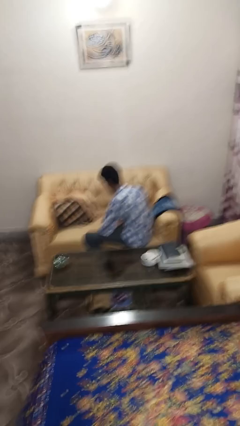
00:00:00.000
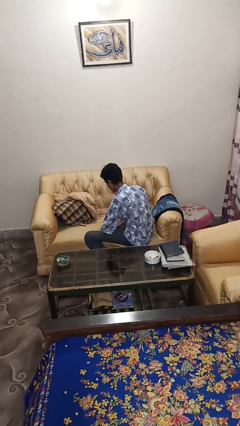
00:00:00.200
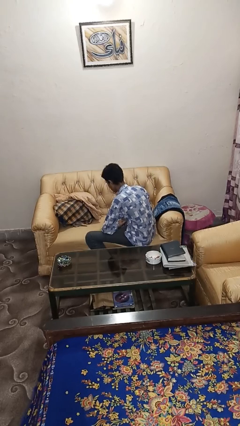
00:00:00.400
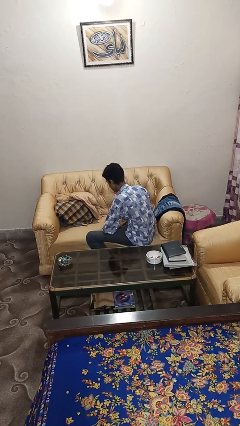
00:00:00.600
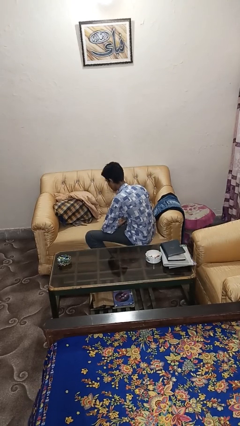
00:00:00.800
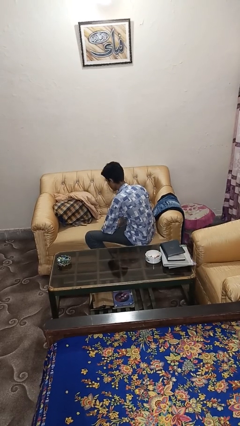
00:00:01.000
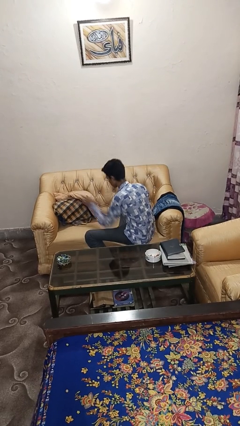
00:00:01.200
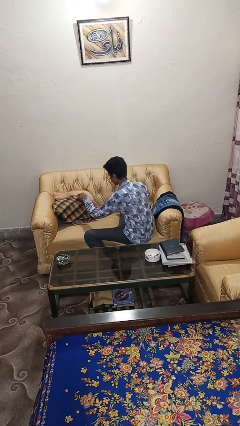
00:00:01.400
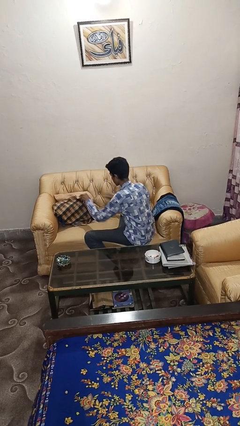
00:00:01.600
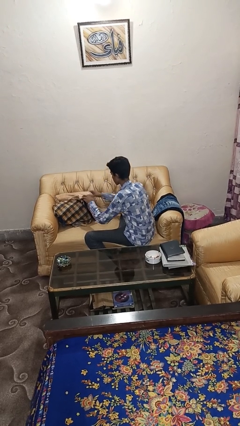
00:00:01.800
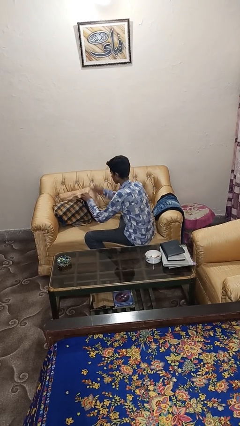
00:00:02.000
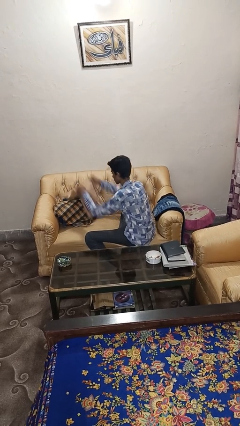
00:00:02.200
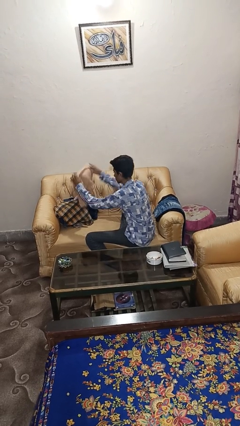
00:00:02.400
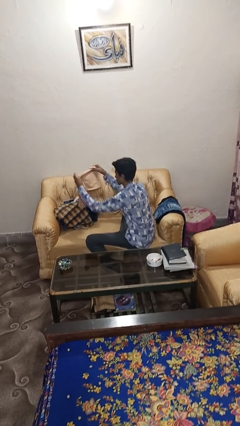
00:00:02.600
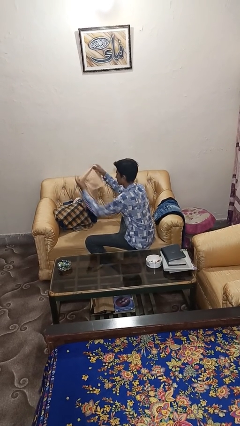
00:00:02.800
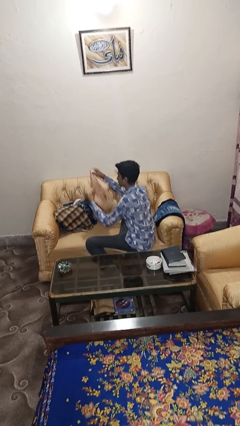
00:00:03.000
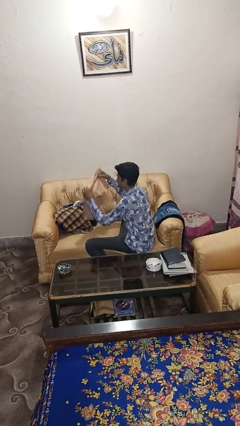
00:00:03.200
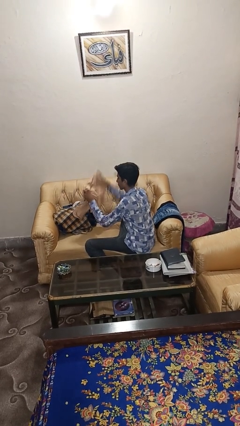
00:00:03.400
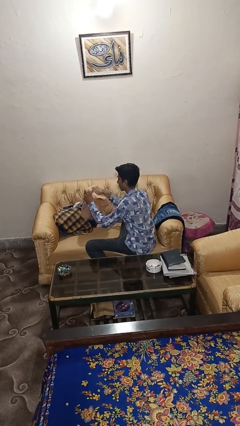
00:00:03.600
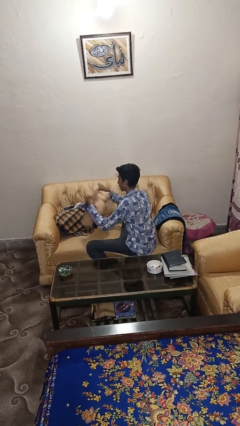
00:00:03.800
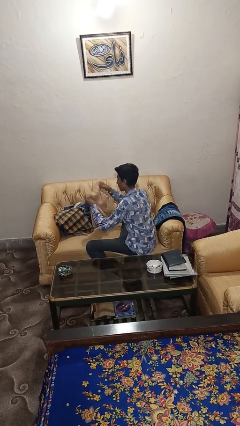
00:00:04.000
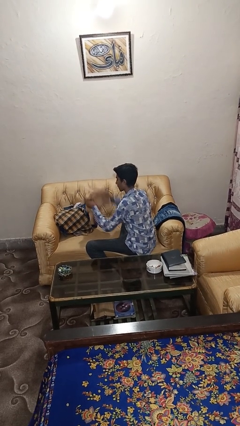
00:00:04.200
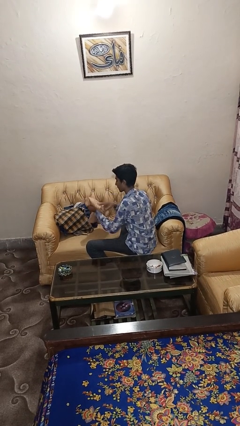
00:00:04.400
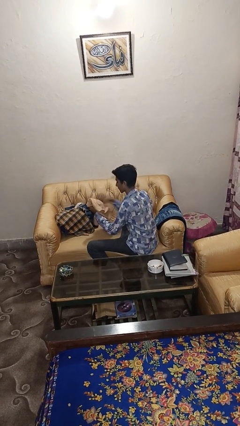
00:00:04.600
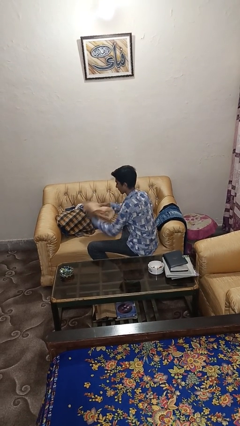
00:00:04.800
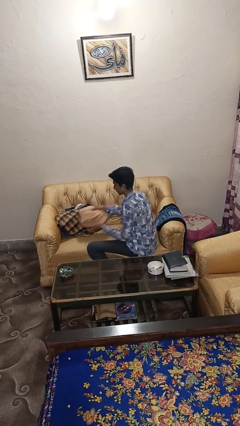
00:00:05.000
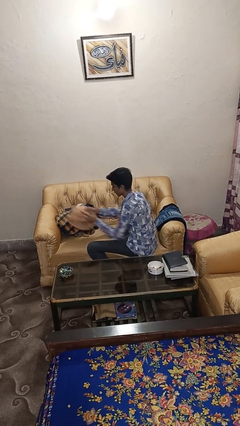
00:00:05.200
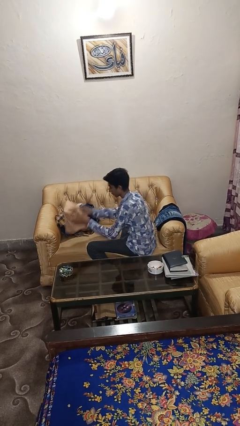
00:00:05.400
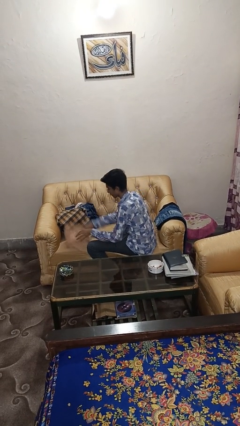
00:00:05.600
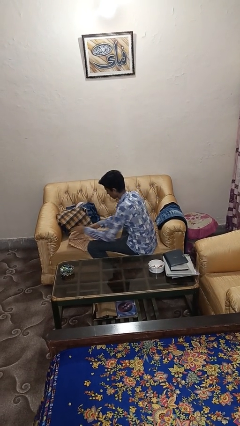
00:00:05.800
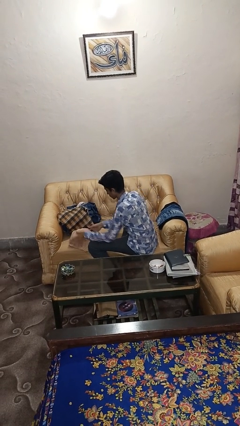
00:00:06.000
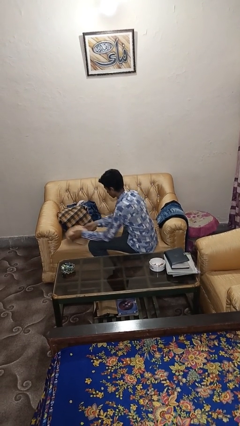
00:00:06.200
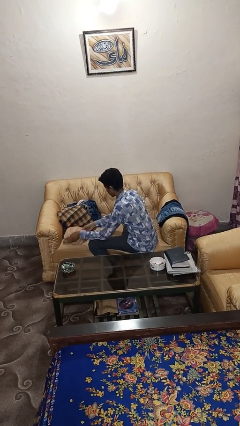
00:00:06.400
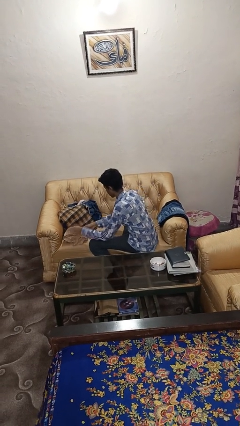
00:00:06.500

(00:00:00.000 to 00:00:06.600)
person folds shirt

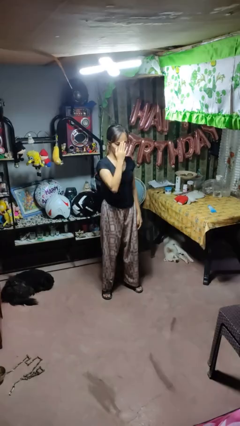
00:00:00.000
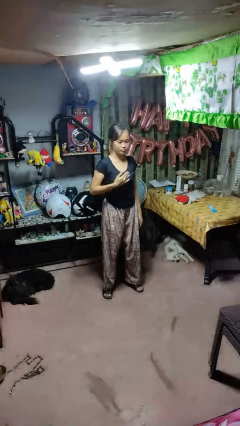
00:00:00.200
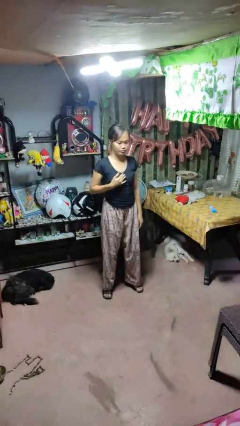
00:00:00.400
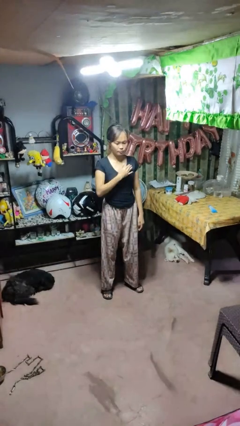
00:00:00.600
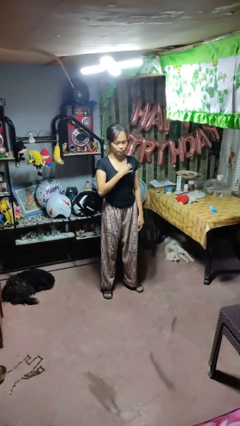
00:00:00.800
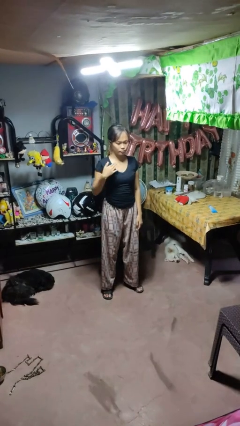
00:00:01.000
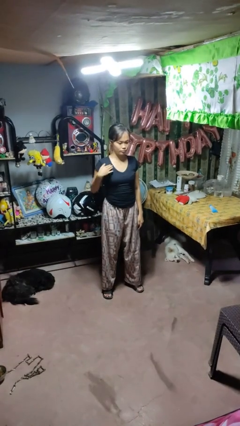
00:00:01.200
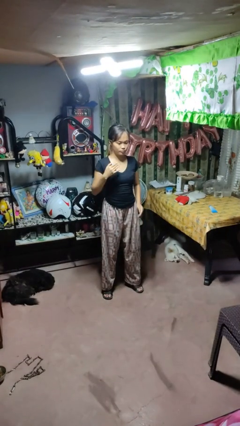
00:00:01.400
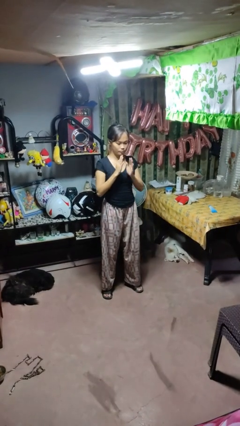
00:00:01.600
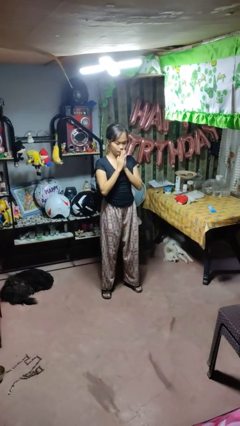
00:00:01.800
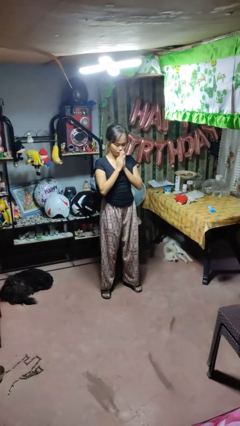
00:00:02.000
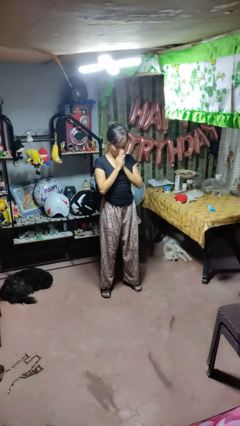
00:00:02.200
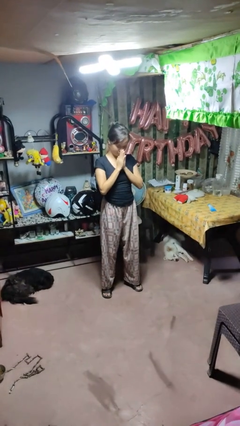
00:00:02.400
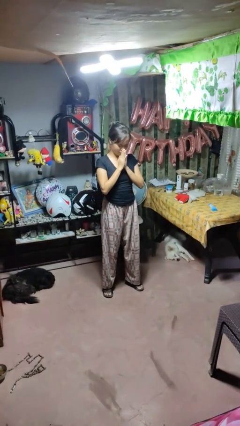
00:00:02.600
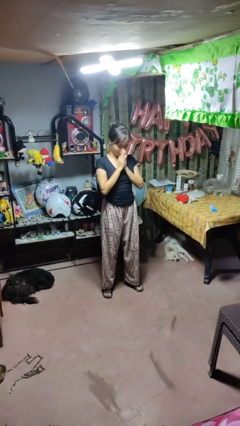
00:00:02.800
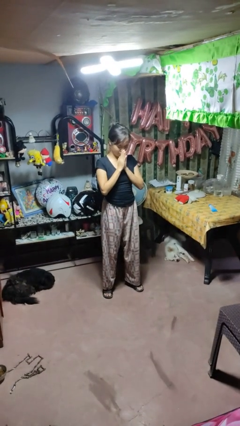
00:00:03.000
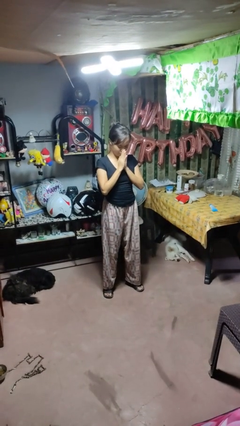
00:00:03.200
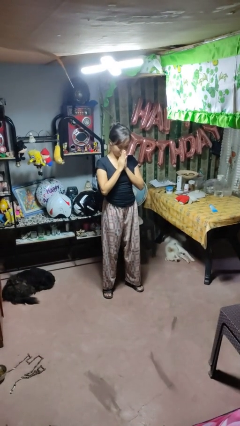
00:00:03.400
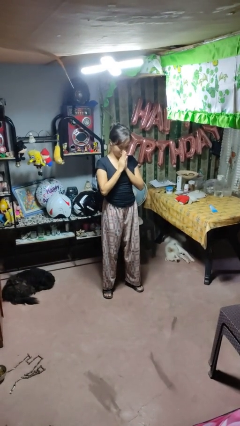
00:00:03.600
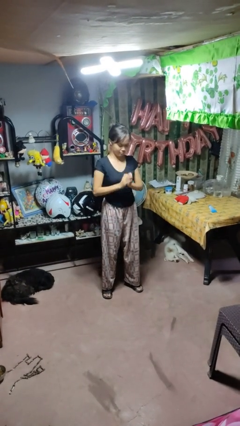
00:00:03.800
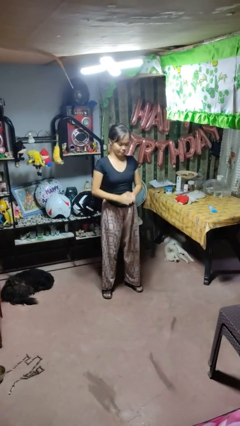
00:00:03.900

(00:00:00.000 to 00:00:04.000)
person prays

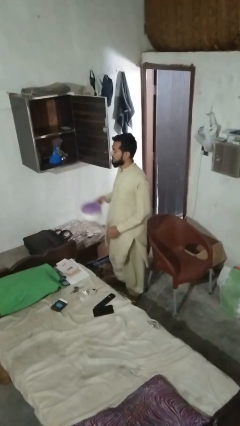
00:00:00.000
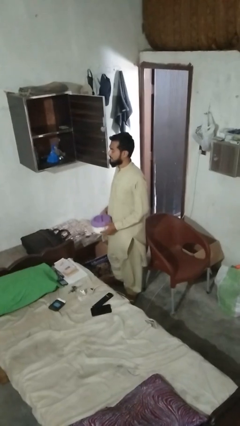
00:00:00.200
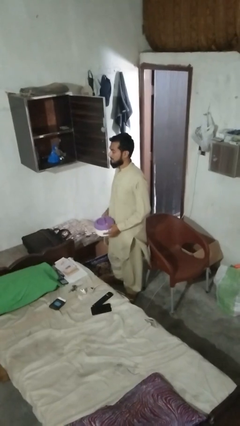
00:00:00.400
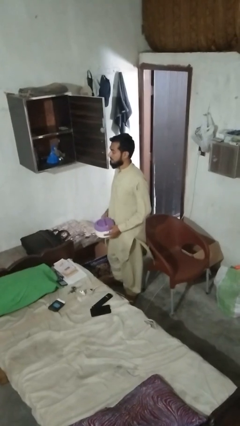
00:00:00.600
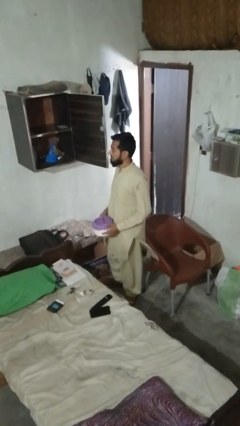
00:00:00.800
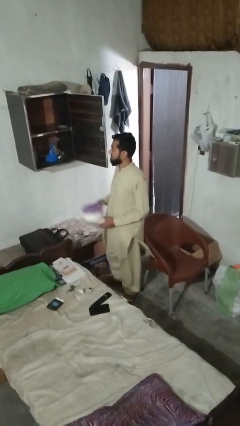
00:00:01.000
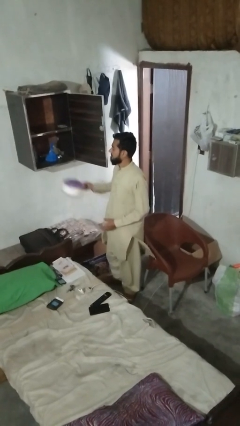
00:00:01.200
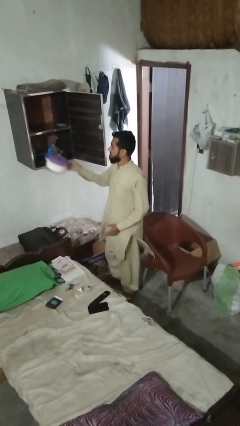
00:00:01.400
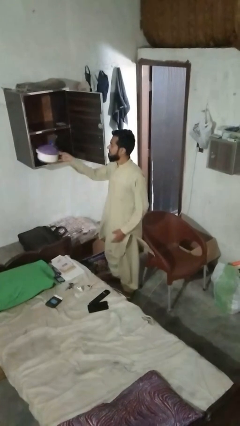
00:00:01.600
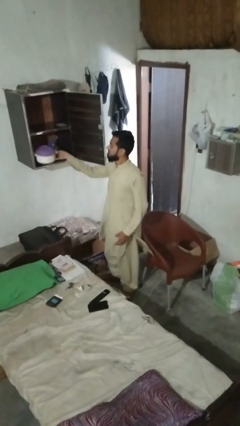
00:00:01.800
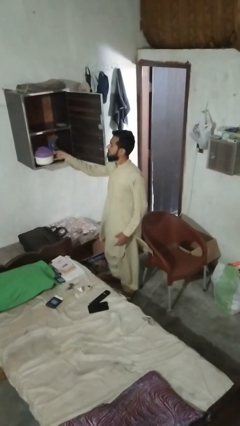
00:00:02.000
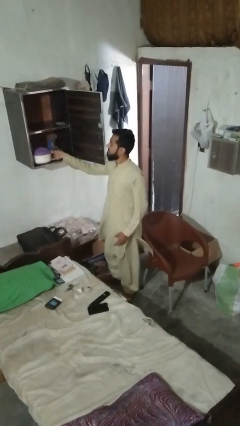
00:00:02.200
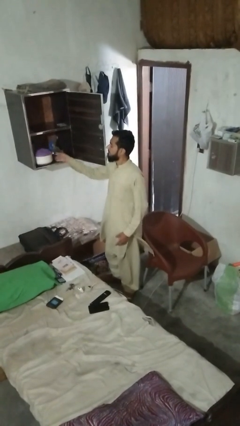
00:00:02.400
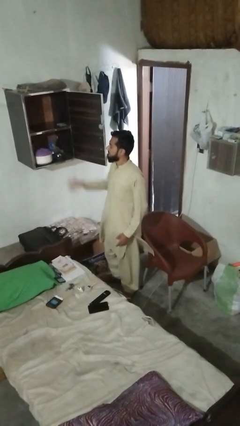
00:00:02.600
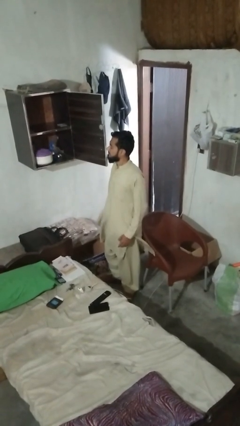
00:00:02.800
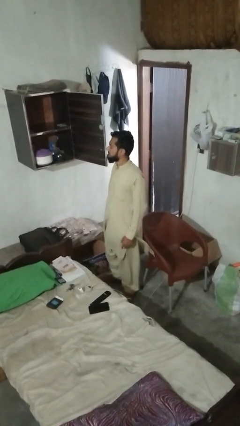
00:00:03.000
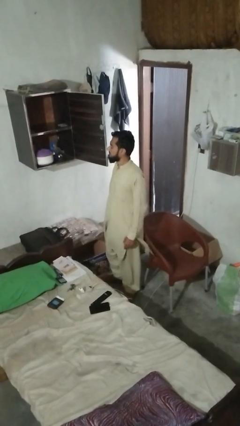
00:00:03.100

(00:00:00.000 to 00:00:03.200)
person loads groceries into cabinet

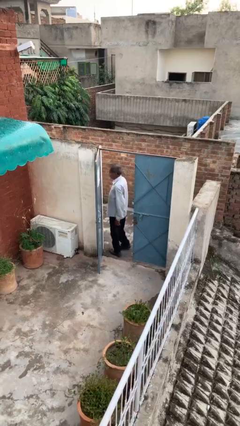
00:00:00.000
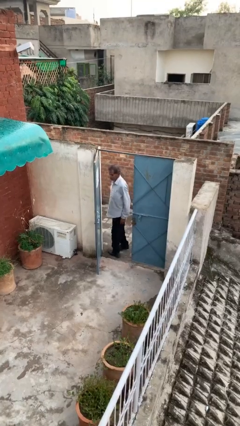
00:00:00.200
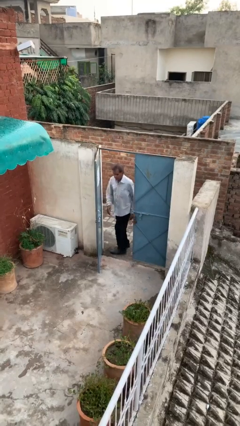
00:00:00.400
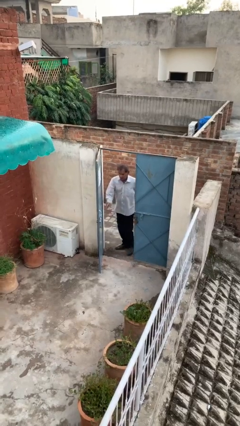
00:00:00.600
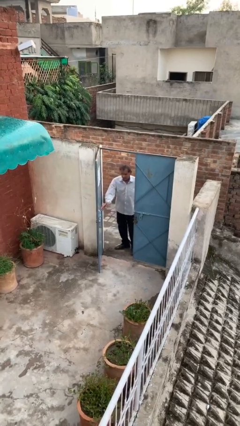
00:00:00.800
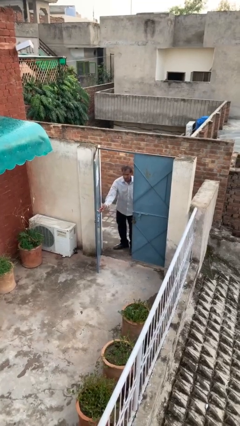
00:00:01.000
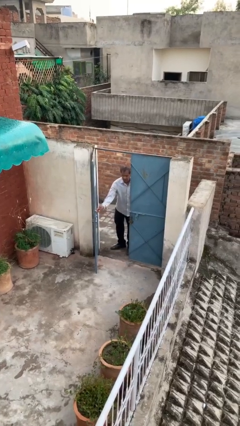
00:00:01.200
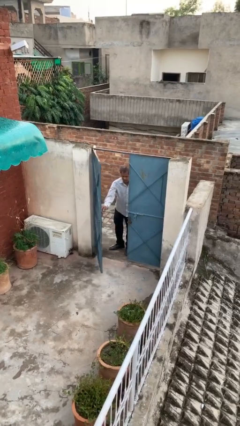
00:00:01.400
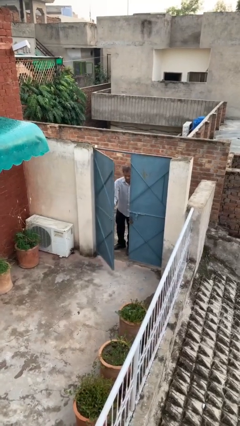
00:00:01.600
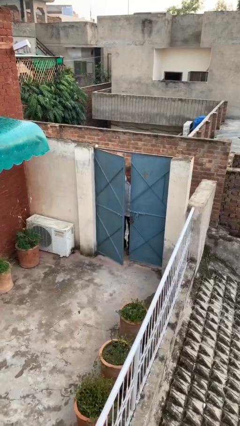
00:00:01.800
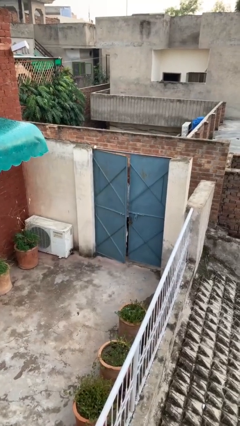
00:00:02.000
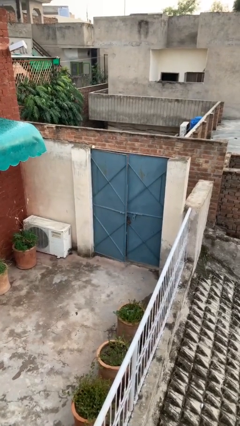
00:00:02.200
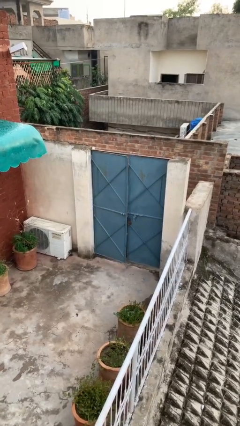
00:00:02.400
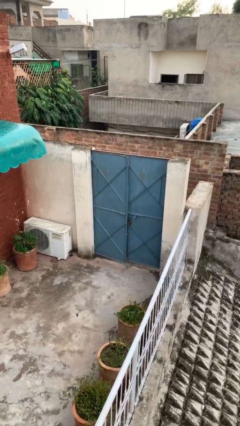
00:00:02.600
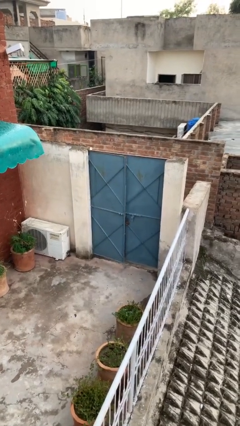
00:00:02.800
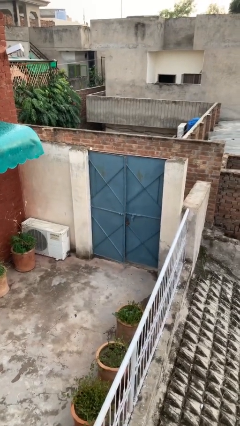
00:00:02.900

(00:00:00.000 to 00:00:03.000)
person closes facility door

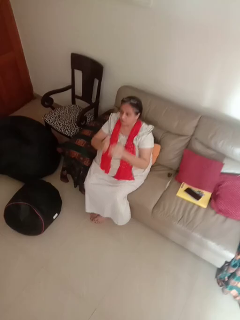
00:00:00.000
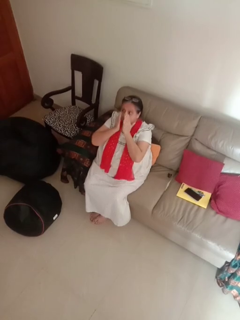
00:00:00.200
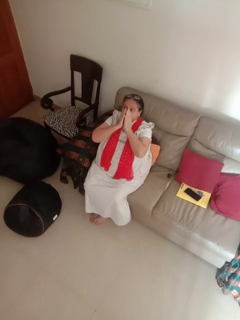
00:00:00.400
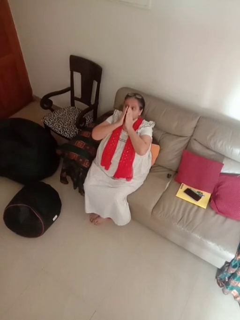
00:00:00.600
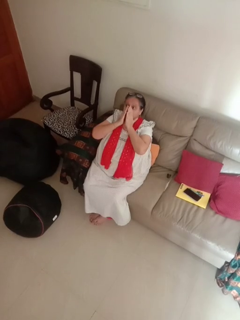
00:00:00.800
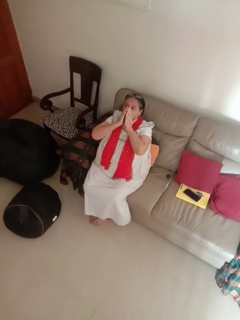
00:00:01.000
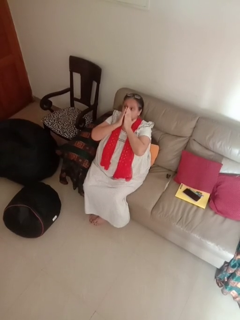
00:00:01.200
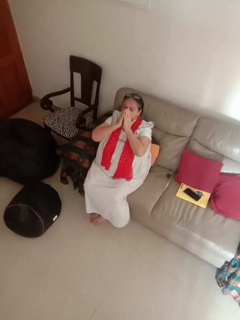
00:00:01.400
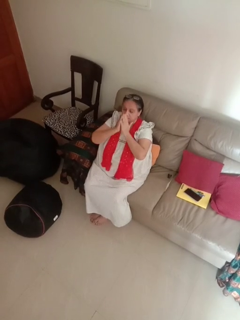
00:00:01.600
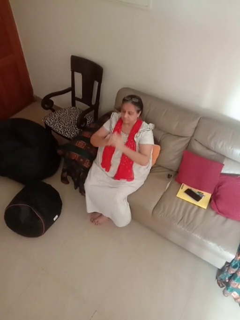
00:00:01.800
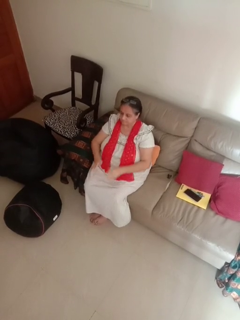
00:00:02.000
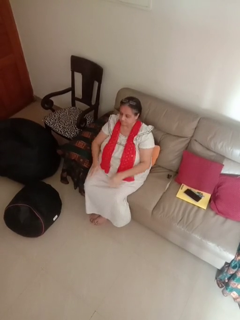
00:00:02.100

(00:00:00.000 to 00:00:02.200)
person covers face with hands
